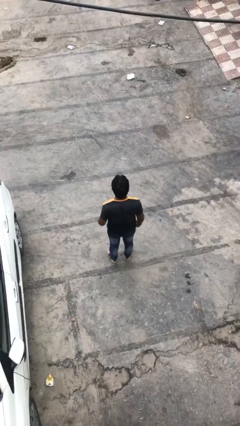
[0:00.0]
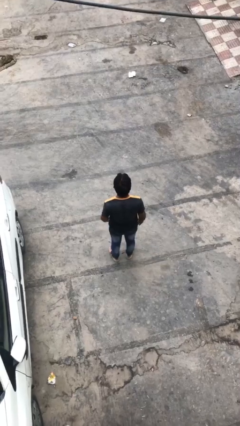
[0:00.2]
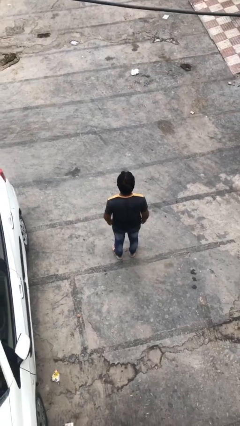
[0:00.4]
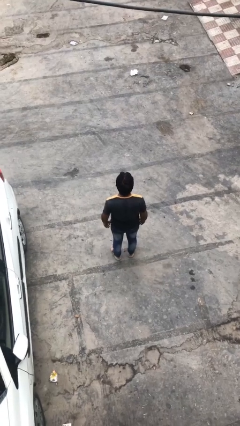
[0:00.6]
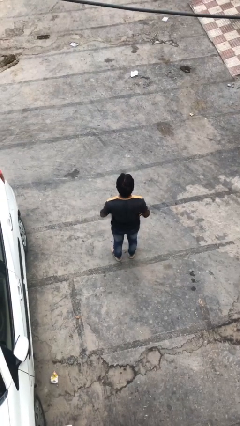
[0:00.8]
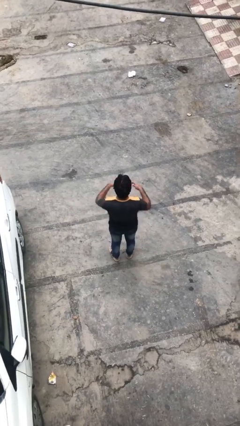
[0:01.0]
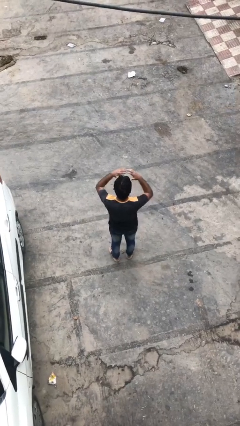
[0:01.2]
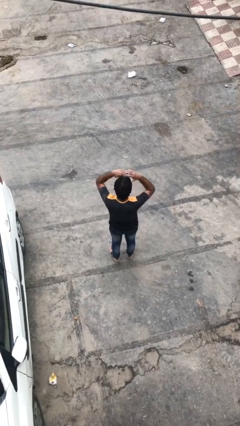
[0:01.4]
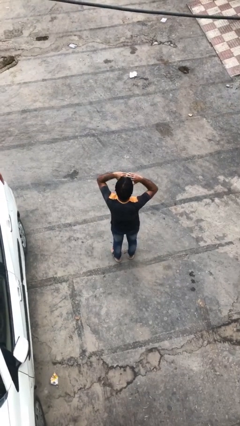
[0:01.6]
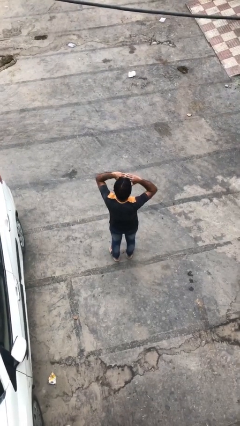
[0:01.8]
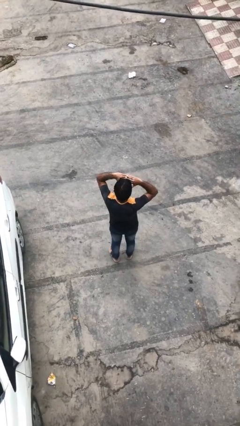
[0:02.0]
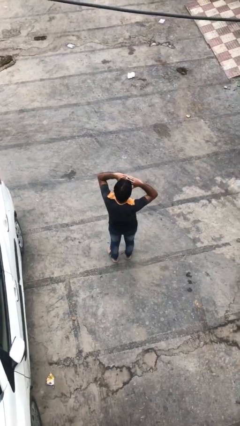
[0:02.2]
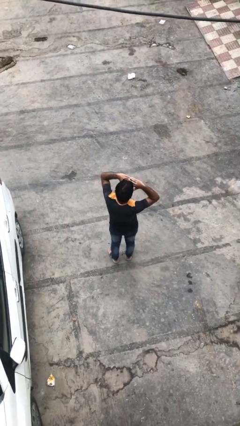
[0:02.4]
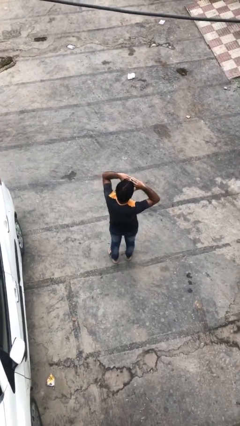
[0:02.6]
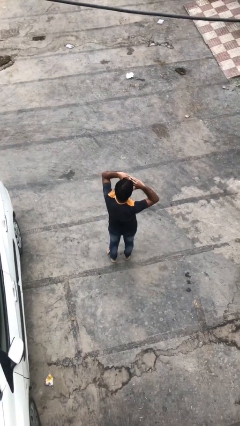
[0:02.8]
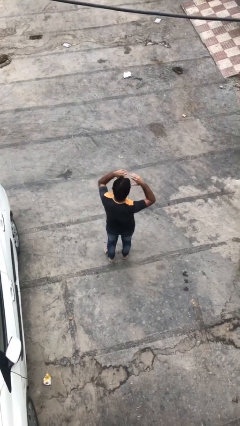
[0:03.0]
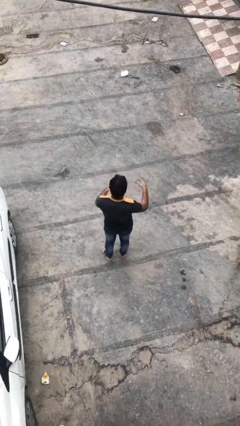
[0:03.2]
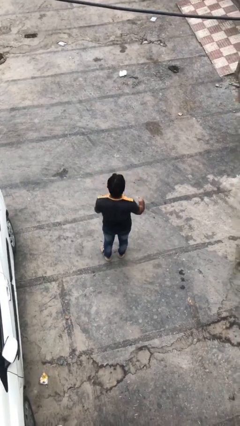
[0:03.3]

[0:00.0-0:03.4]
person shades eyes

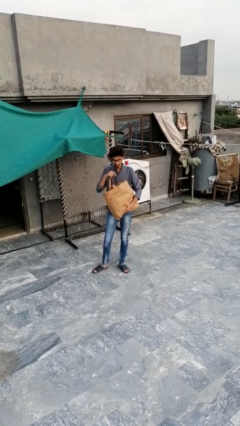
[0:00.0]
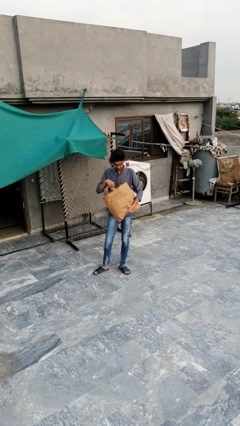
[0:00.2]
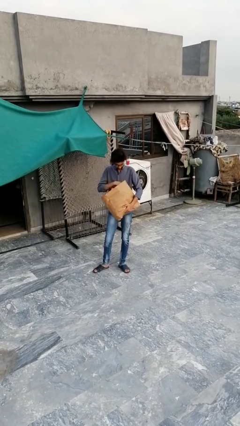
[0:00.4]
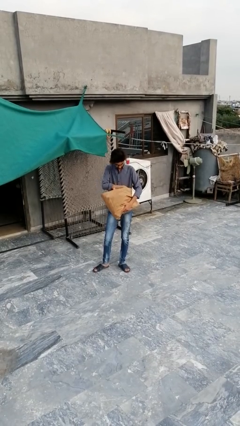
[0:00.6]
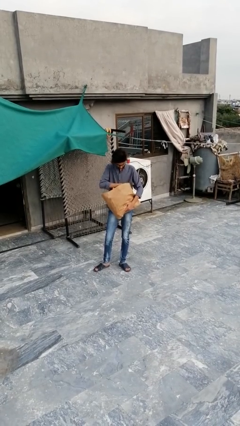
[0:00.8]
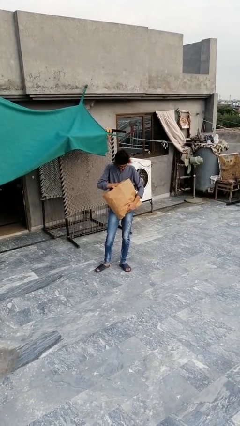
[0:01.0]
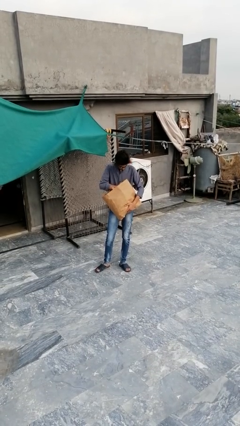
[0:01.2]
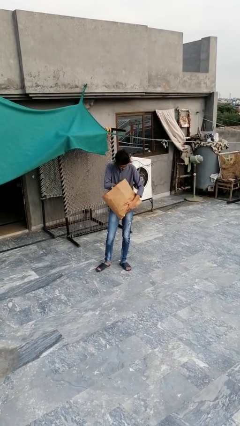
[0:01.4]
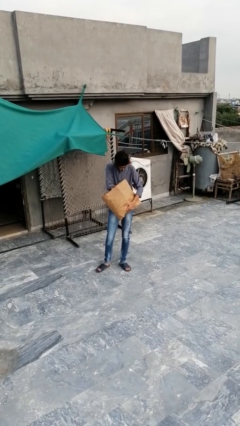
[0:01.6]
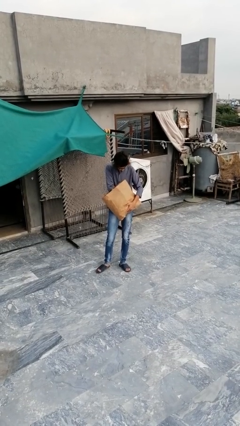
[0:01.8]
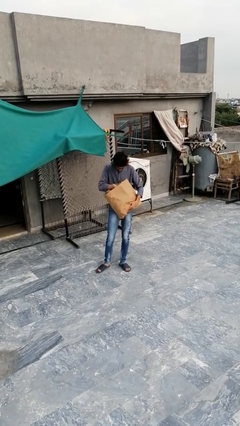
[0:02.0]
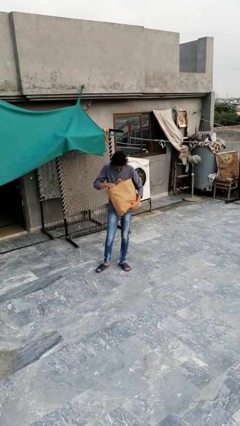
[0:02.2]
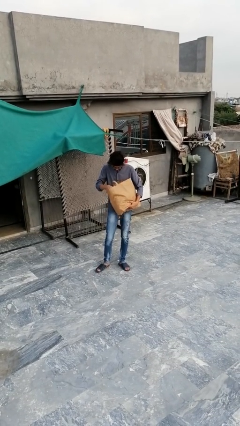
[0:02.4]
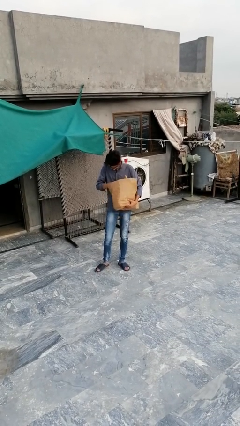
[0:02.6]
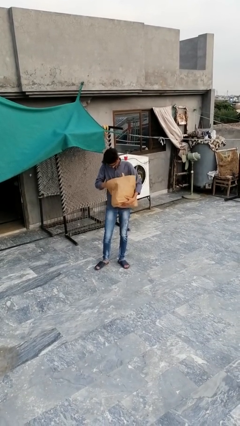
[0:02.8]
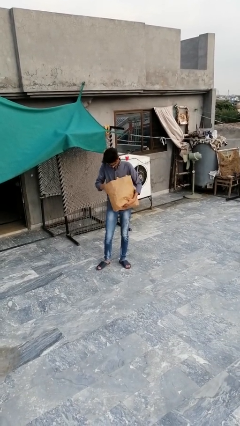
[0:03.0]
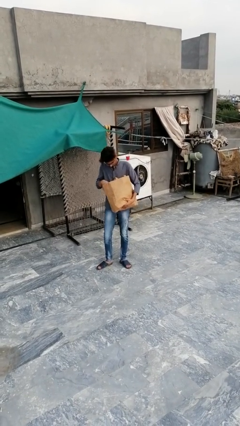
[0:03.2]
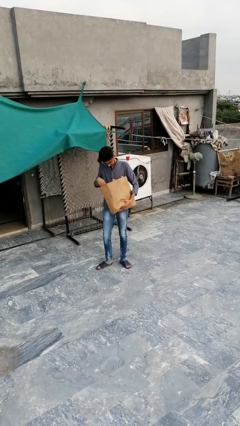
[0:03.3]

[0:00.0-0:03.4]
person searches in bag

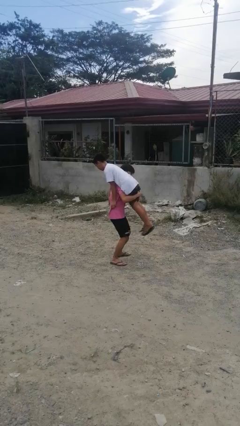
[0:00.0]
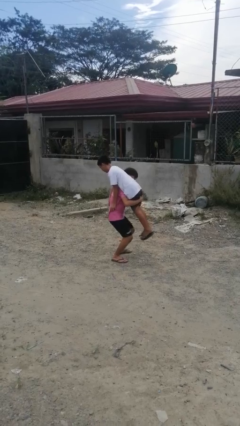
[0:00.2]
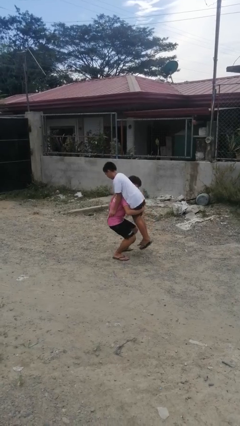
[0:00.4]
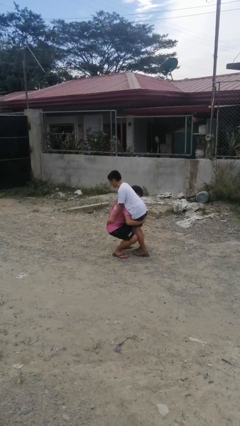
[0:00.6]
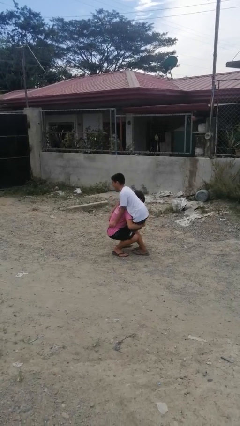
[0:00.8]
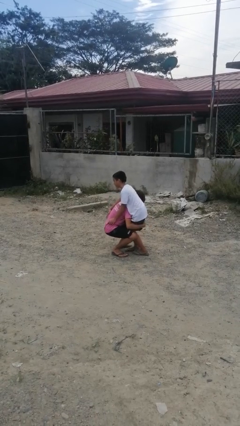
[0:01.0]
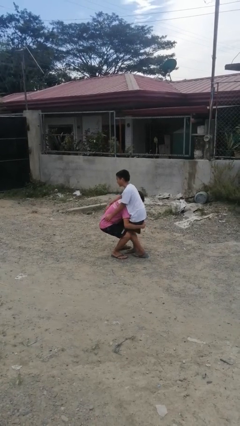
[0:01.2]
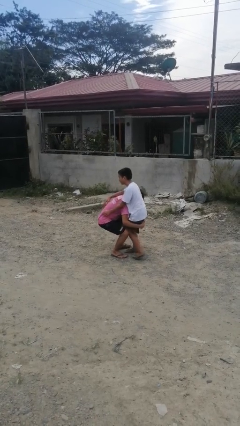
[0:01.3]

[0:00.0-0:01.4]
person puts down person

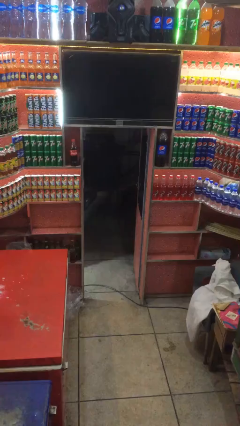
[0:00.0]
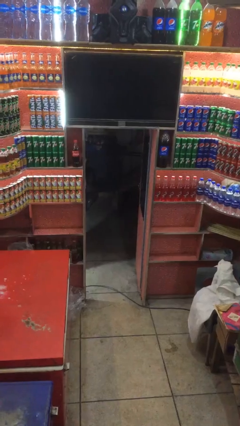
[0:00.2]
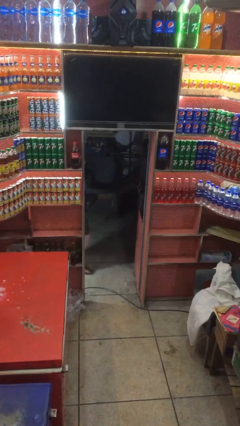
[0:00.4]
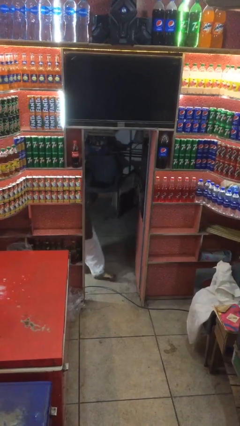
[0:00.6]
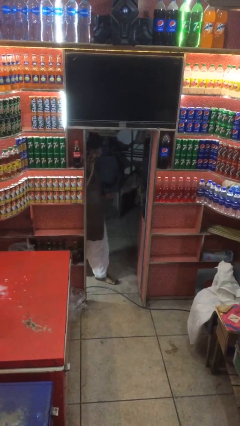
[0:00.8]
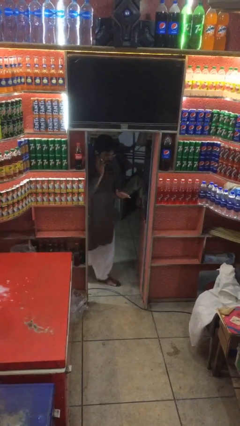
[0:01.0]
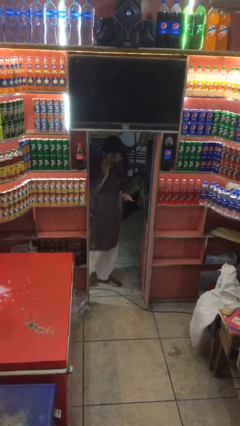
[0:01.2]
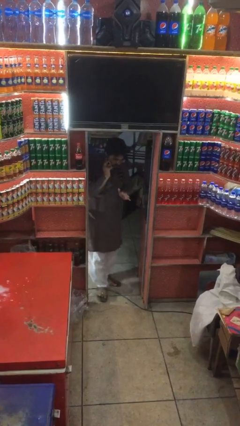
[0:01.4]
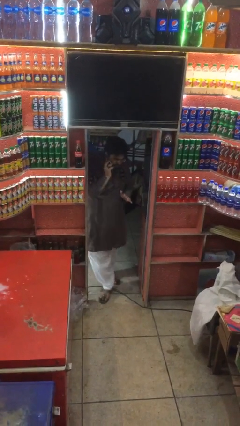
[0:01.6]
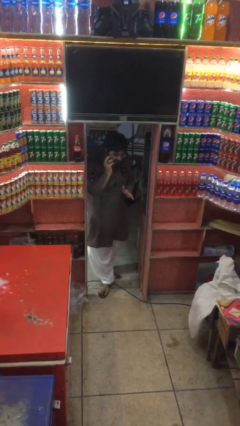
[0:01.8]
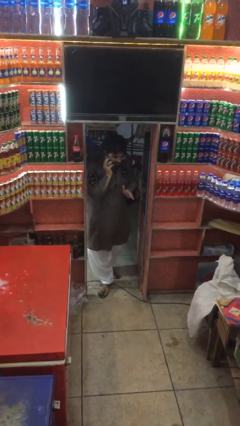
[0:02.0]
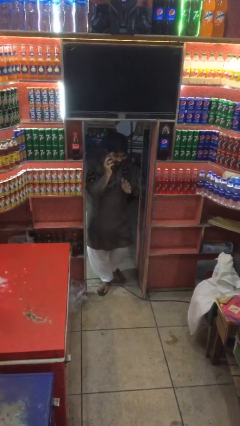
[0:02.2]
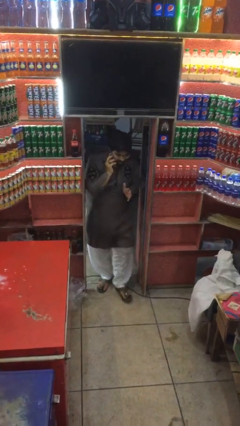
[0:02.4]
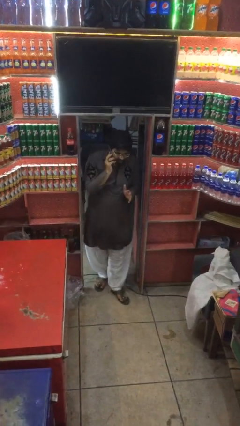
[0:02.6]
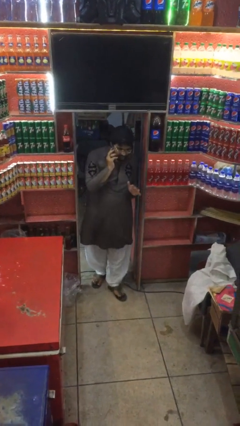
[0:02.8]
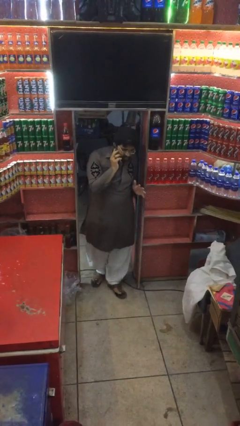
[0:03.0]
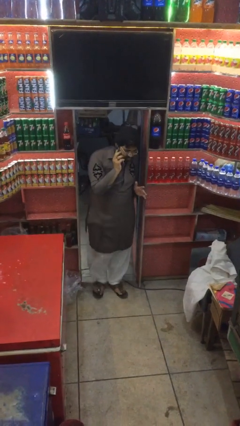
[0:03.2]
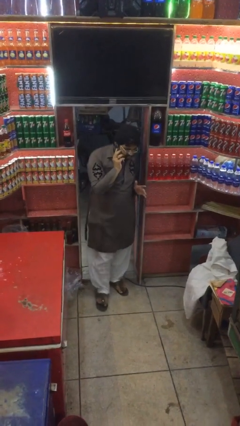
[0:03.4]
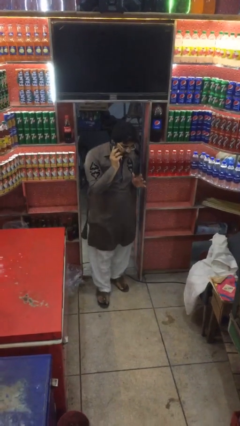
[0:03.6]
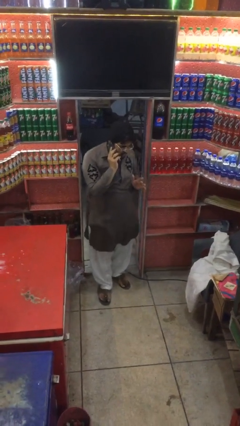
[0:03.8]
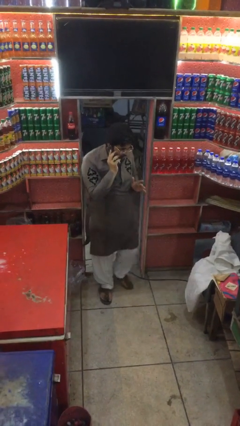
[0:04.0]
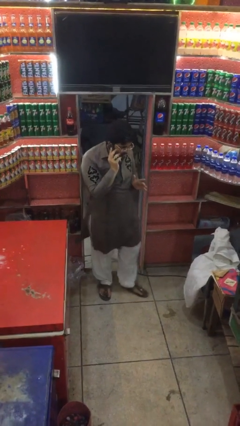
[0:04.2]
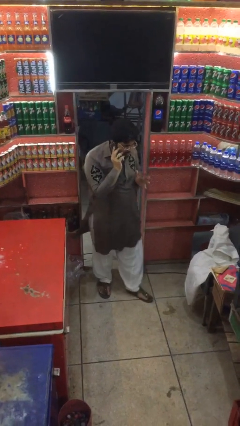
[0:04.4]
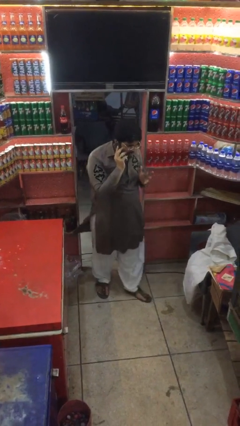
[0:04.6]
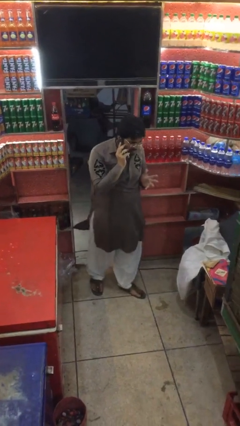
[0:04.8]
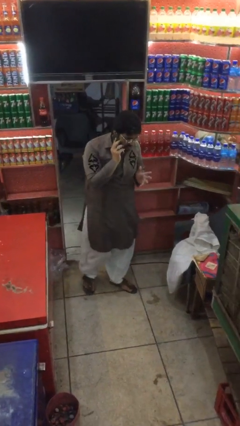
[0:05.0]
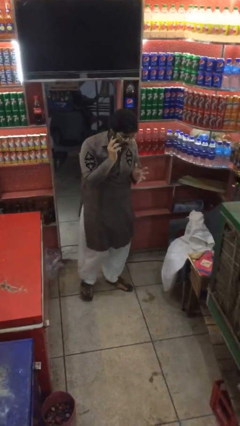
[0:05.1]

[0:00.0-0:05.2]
person enters scene through structure

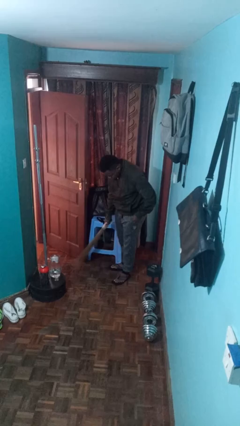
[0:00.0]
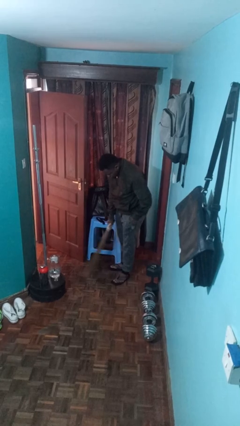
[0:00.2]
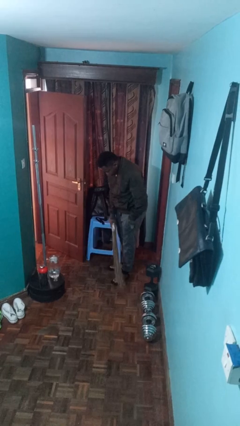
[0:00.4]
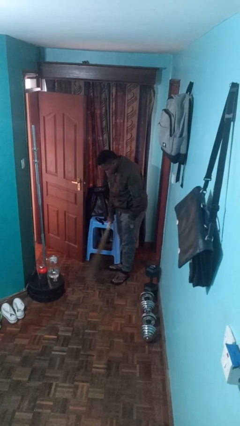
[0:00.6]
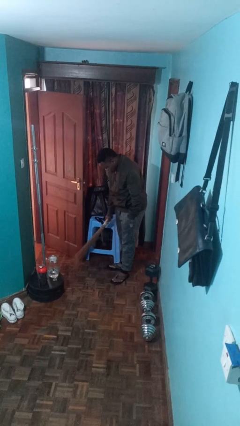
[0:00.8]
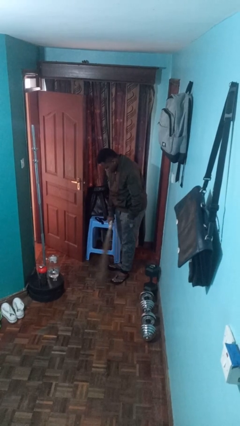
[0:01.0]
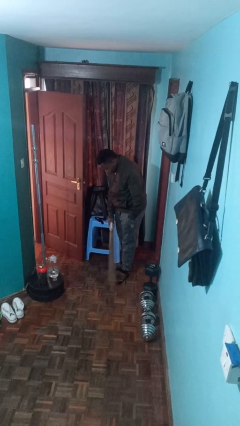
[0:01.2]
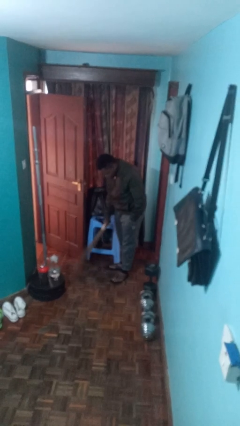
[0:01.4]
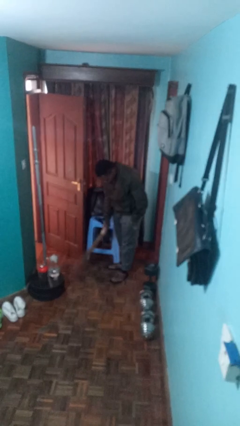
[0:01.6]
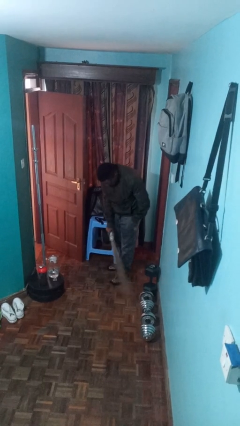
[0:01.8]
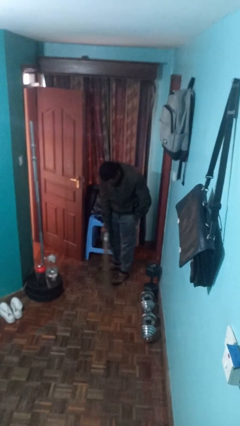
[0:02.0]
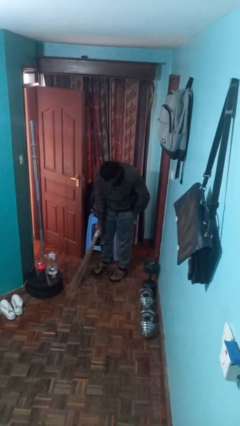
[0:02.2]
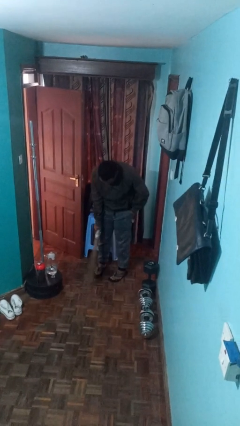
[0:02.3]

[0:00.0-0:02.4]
person sweeps floor

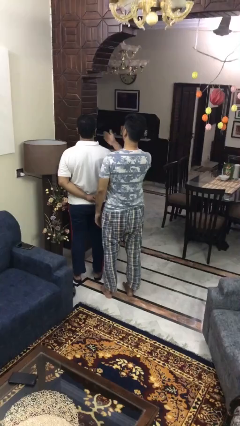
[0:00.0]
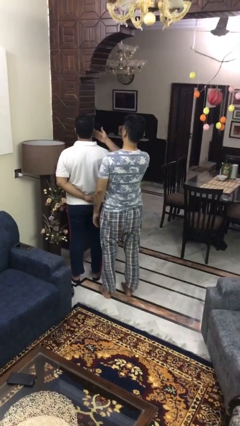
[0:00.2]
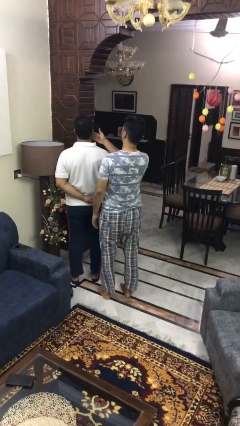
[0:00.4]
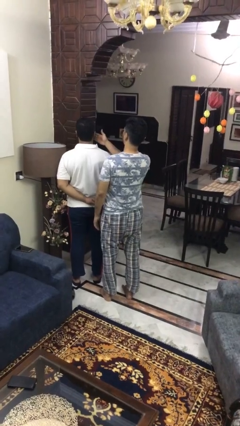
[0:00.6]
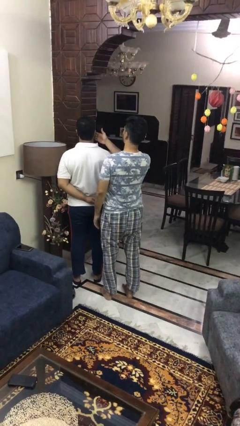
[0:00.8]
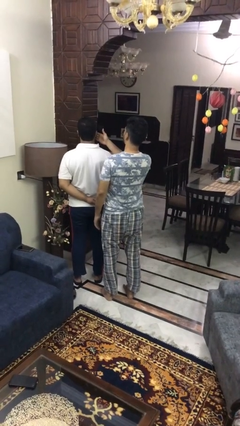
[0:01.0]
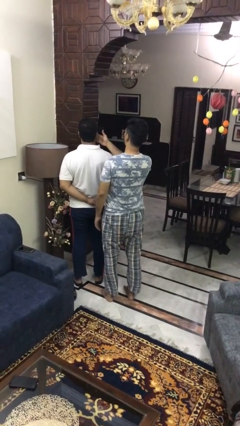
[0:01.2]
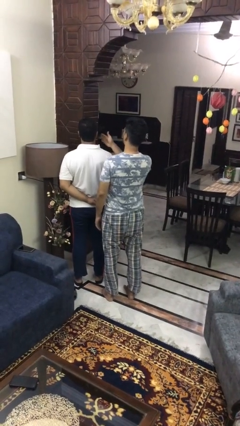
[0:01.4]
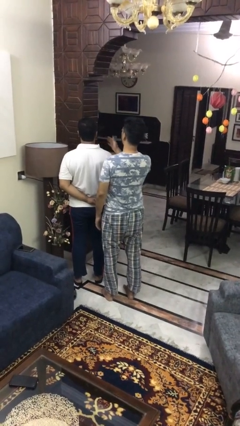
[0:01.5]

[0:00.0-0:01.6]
person touches face of person
